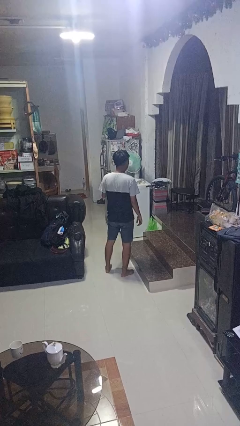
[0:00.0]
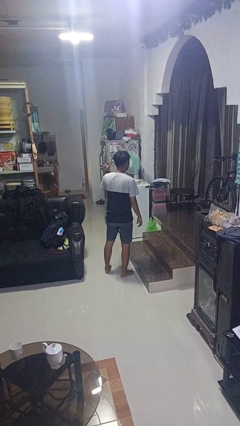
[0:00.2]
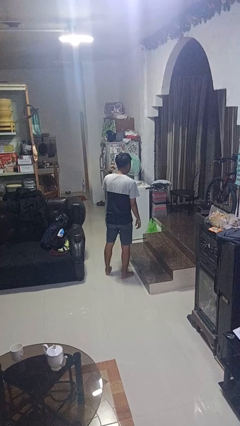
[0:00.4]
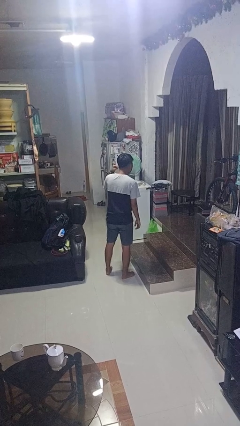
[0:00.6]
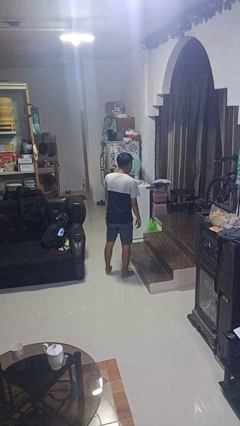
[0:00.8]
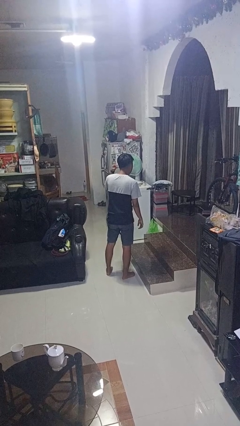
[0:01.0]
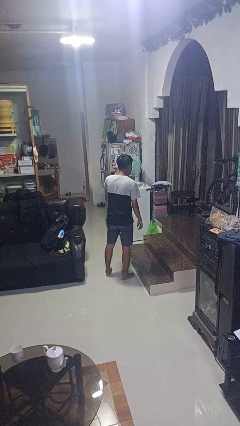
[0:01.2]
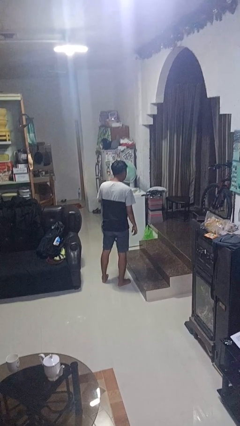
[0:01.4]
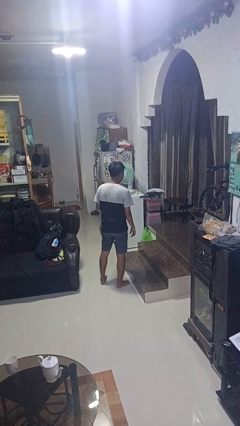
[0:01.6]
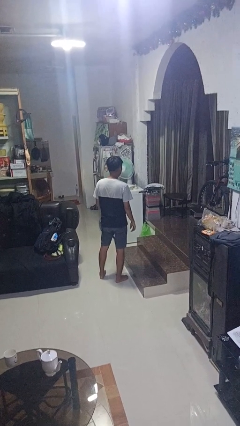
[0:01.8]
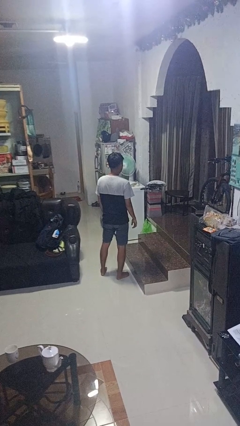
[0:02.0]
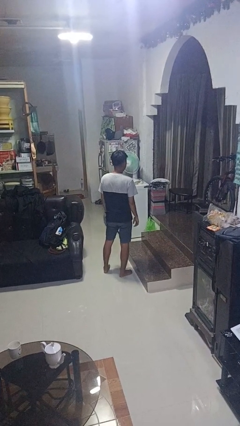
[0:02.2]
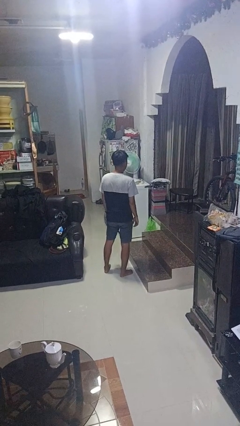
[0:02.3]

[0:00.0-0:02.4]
person gestures listen closely

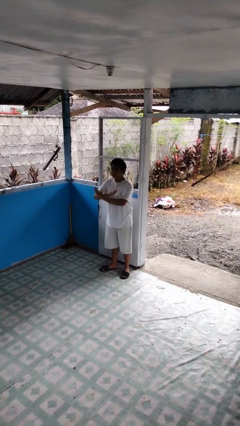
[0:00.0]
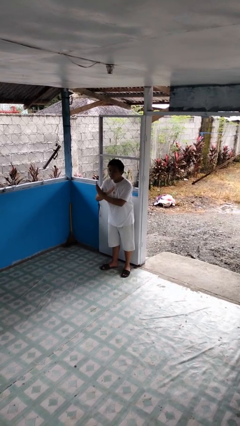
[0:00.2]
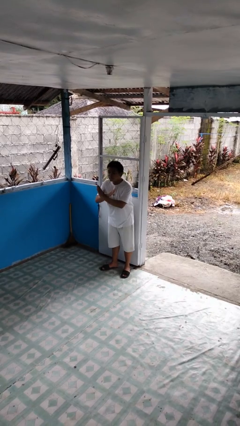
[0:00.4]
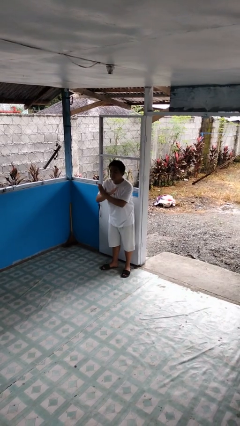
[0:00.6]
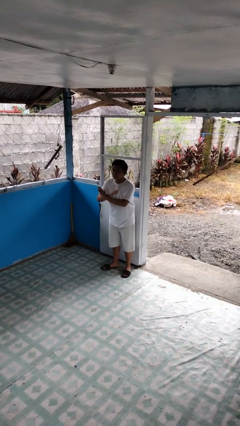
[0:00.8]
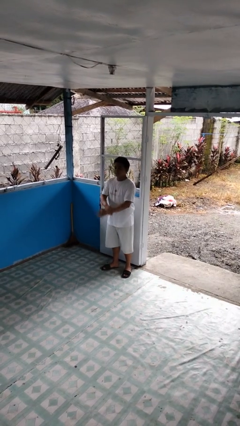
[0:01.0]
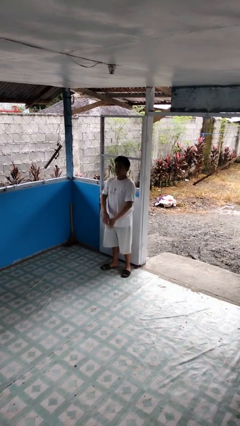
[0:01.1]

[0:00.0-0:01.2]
person gestures arms x

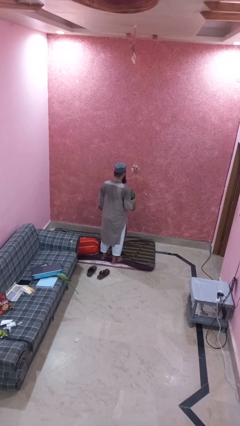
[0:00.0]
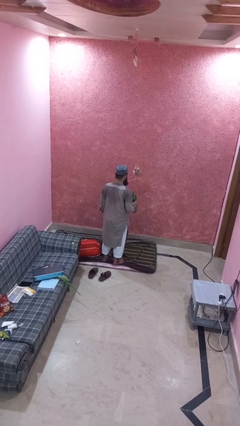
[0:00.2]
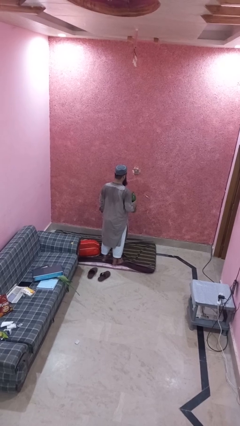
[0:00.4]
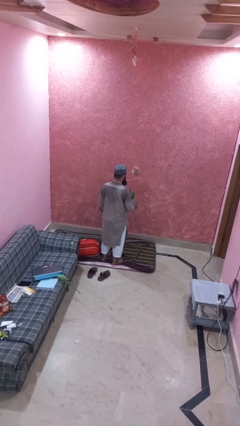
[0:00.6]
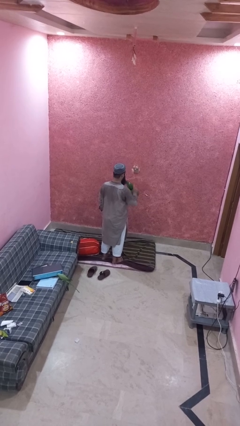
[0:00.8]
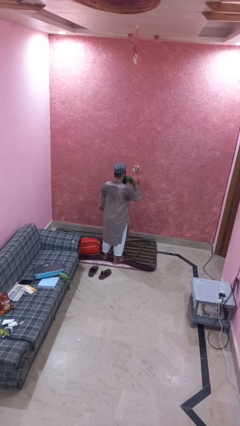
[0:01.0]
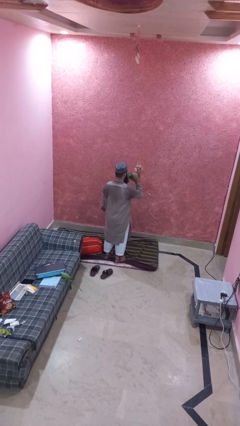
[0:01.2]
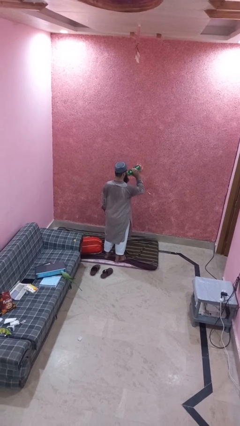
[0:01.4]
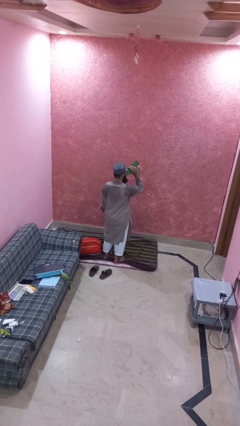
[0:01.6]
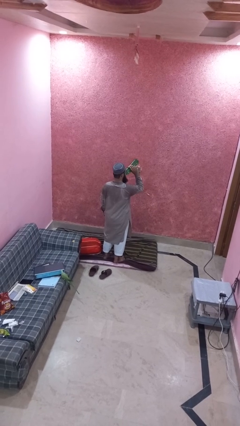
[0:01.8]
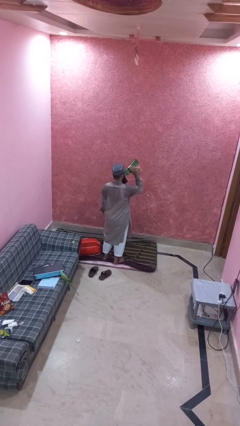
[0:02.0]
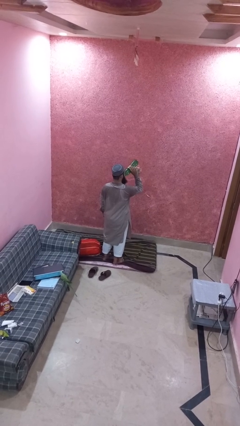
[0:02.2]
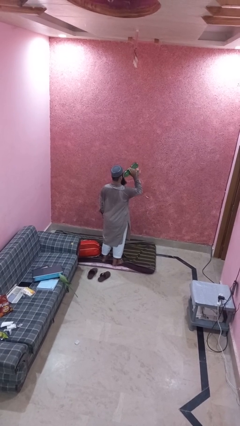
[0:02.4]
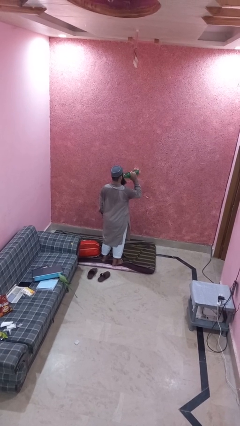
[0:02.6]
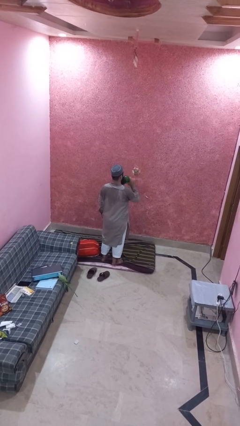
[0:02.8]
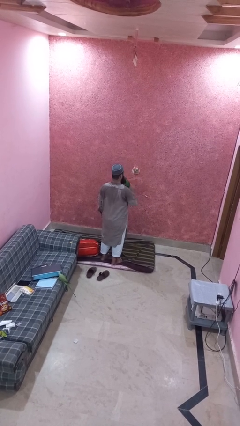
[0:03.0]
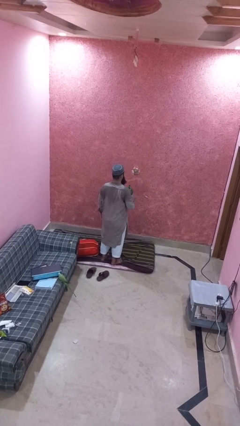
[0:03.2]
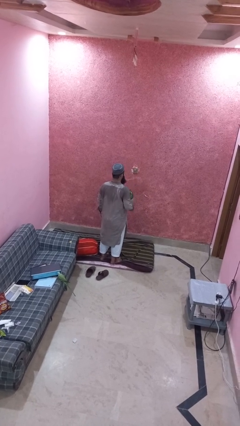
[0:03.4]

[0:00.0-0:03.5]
person drinks from bottle

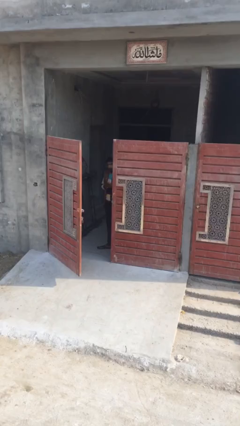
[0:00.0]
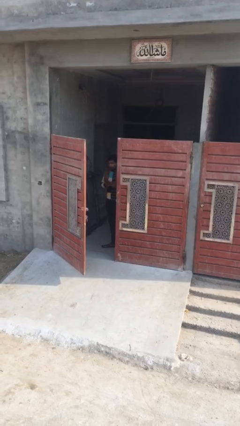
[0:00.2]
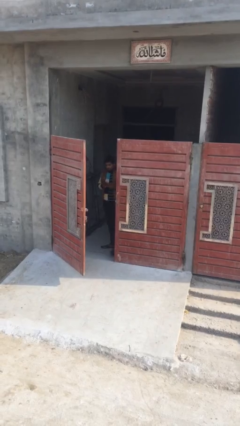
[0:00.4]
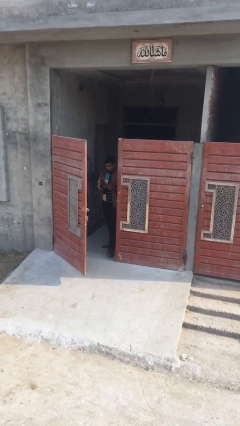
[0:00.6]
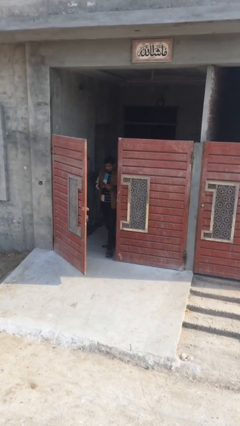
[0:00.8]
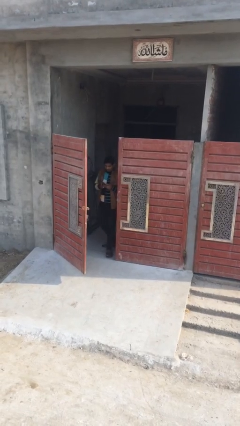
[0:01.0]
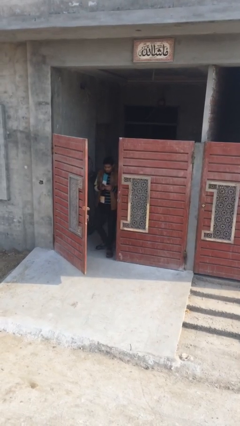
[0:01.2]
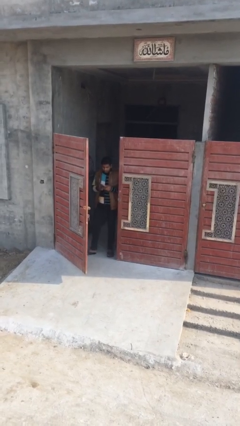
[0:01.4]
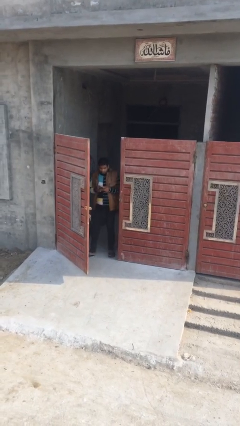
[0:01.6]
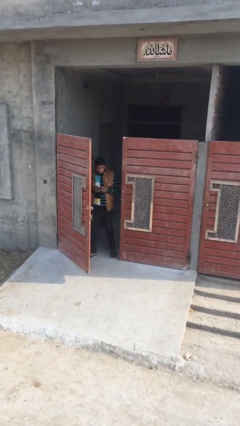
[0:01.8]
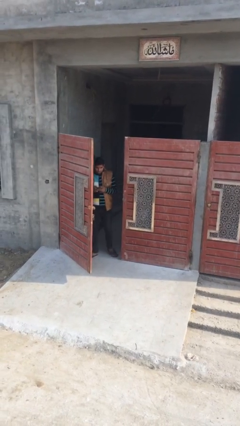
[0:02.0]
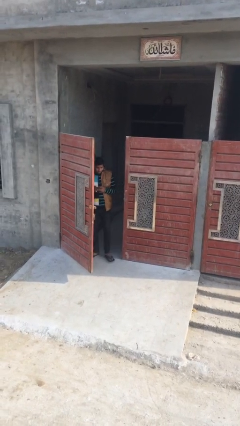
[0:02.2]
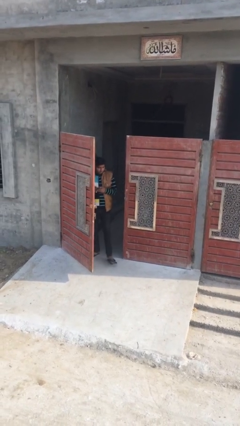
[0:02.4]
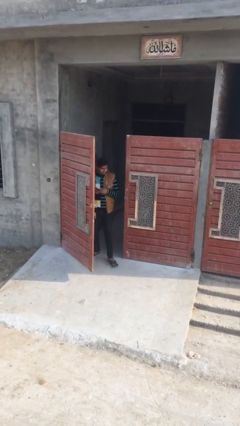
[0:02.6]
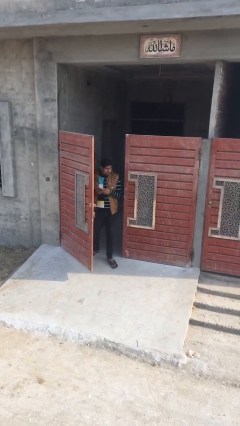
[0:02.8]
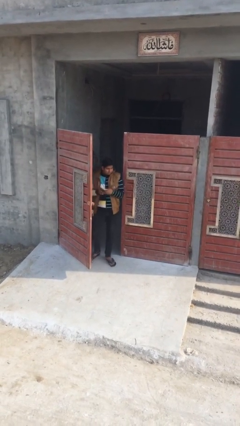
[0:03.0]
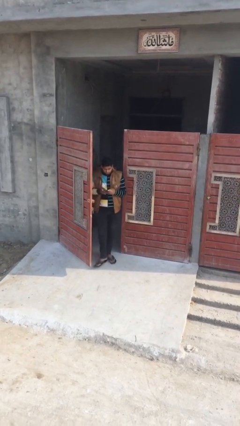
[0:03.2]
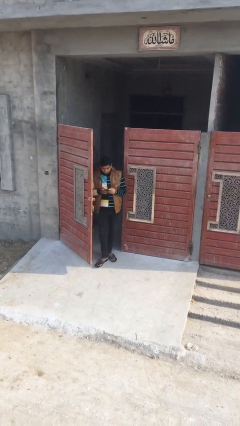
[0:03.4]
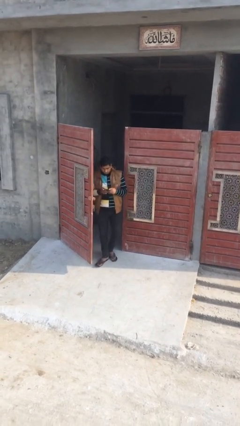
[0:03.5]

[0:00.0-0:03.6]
person enters scene through structure

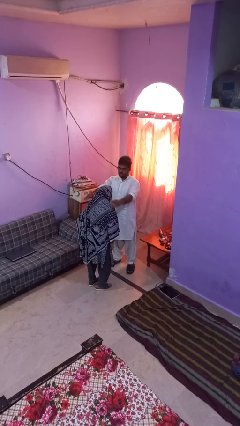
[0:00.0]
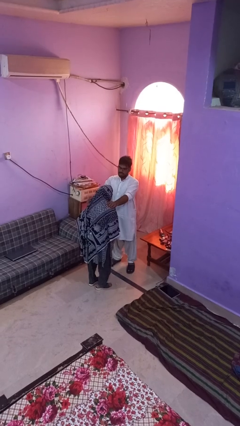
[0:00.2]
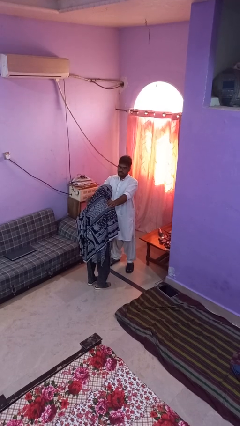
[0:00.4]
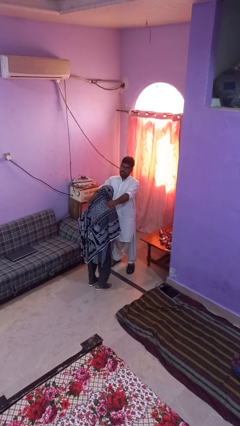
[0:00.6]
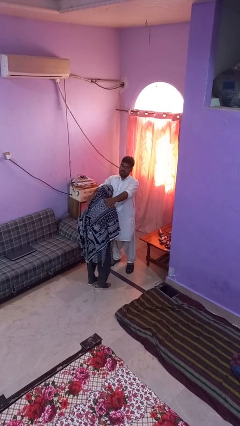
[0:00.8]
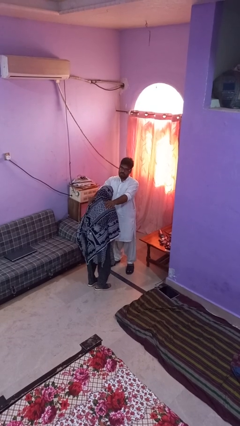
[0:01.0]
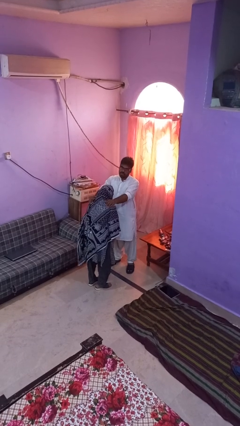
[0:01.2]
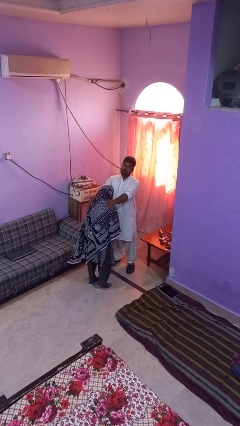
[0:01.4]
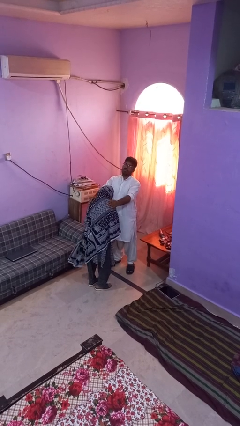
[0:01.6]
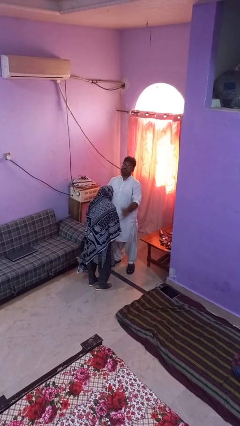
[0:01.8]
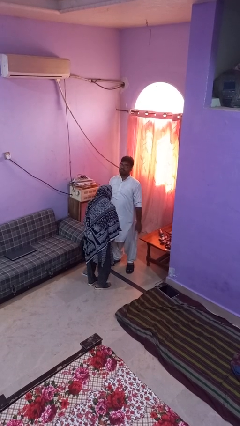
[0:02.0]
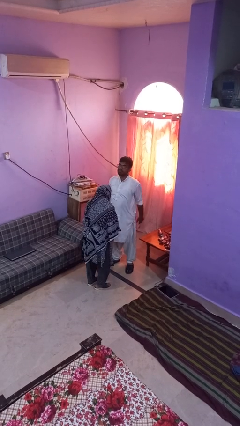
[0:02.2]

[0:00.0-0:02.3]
person pounds shoulders of person

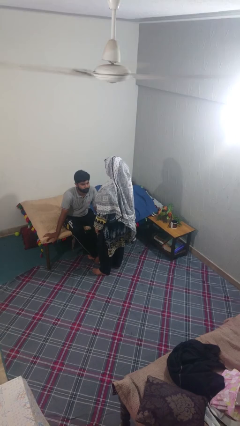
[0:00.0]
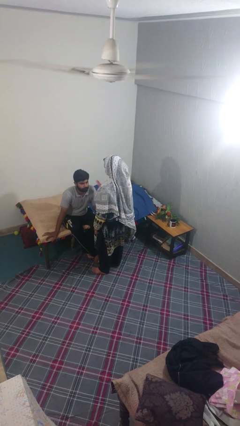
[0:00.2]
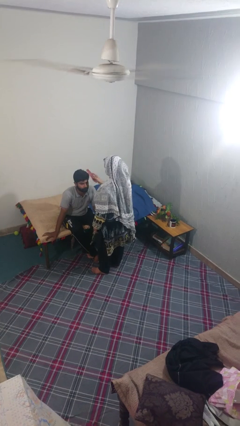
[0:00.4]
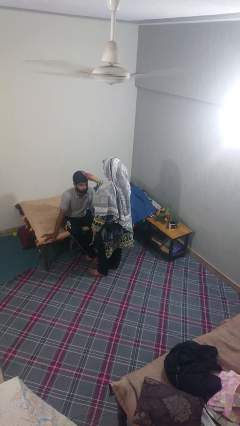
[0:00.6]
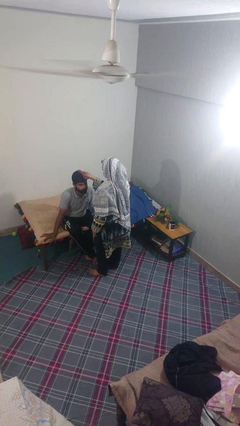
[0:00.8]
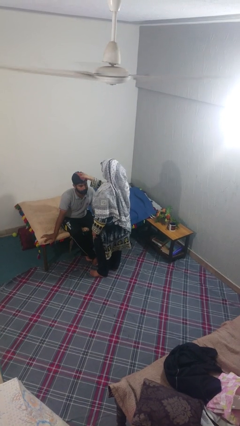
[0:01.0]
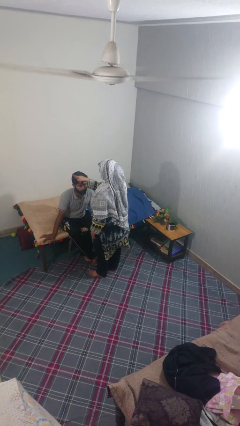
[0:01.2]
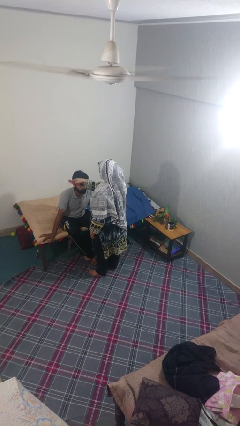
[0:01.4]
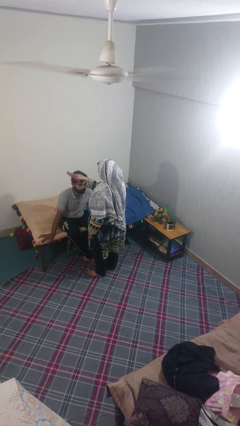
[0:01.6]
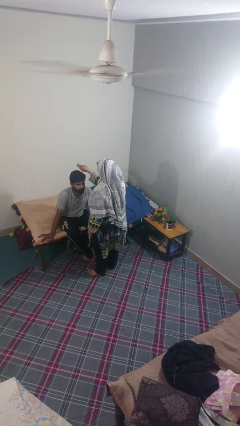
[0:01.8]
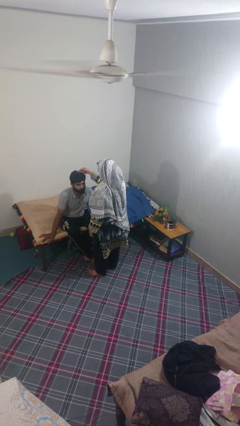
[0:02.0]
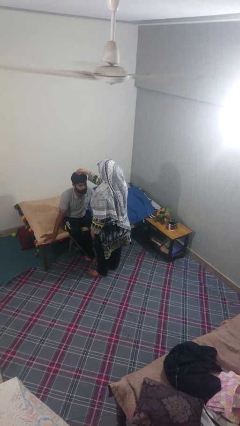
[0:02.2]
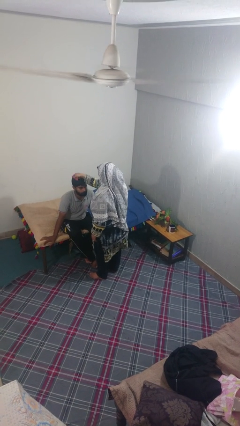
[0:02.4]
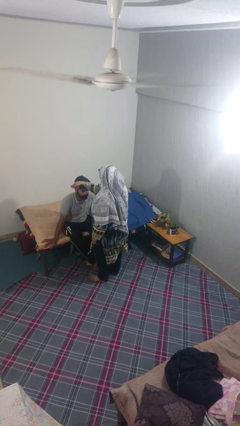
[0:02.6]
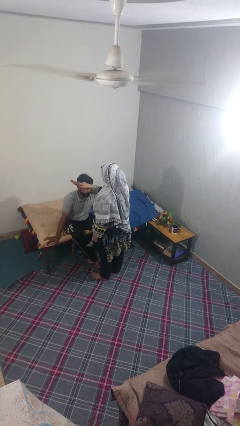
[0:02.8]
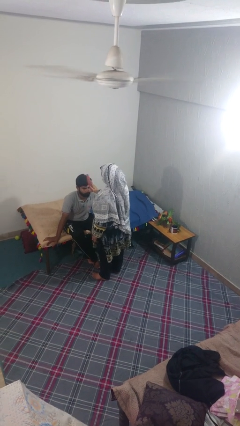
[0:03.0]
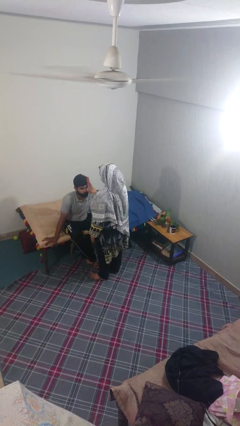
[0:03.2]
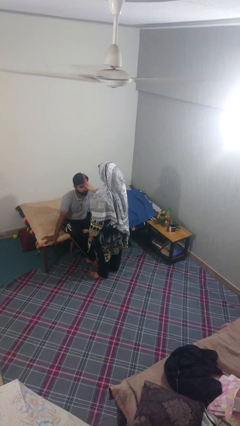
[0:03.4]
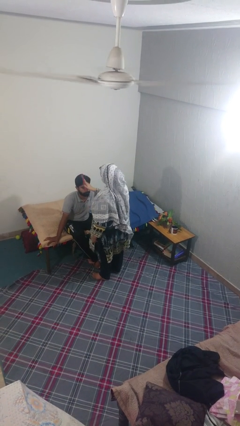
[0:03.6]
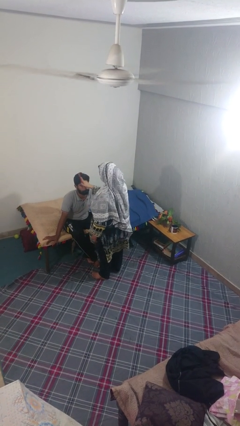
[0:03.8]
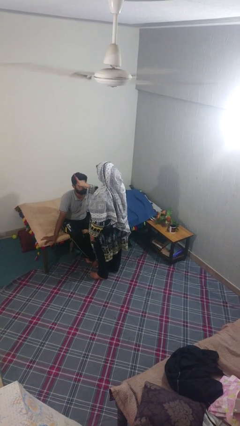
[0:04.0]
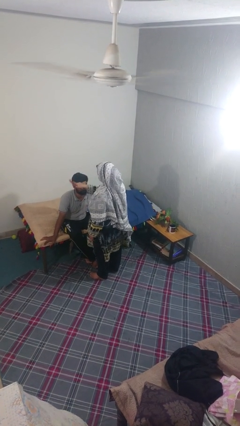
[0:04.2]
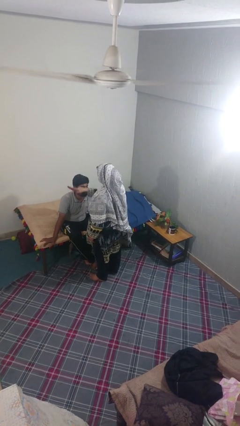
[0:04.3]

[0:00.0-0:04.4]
person brushes hair of person
